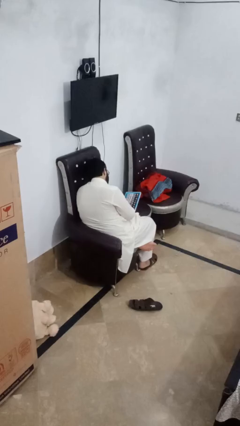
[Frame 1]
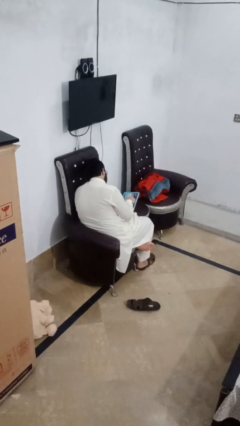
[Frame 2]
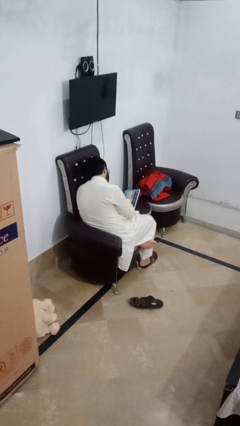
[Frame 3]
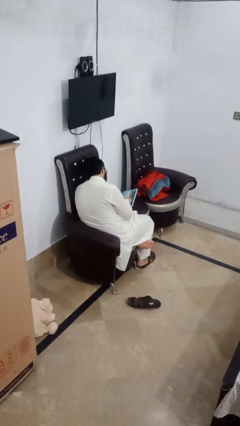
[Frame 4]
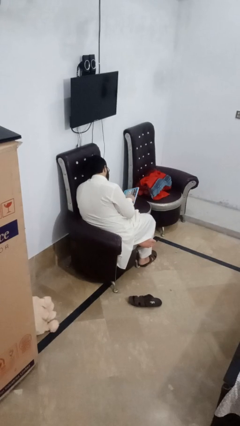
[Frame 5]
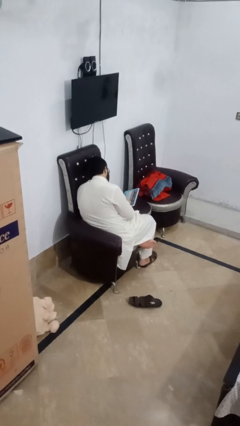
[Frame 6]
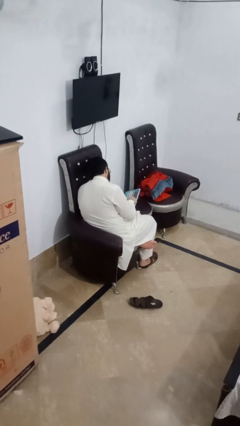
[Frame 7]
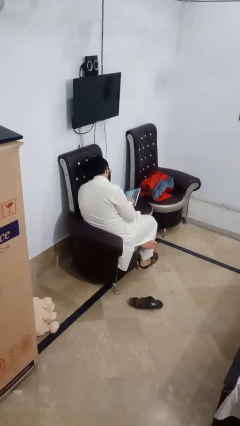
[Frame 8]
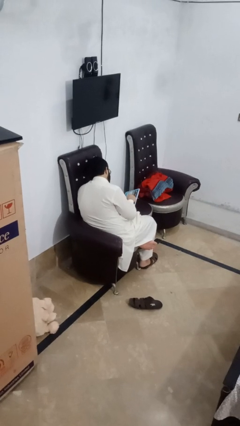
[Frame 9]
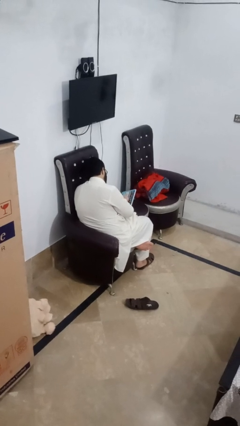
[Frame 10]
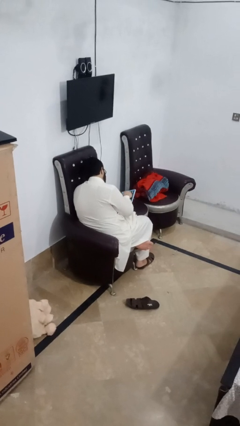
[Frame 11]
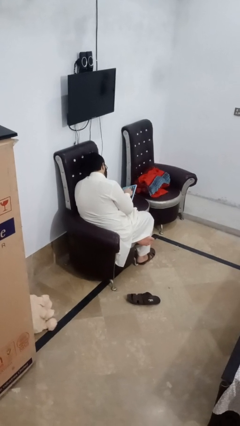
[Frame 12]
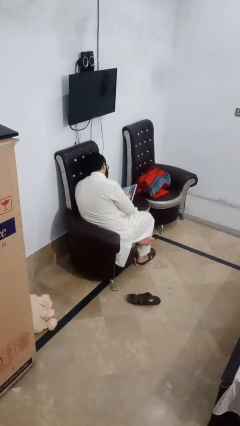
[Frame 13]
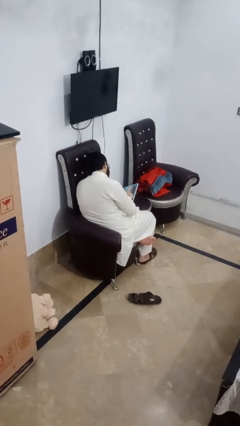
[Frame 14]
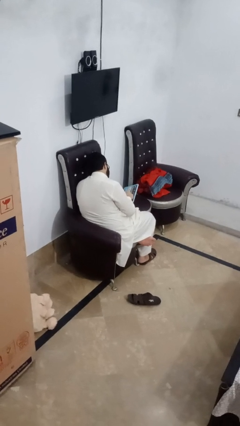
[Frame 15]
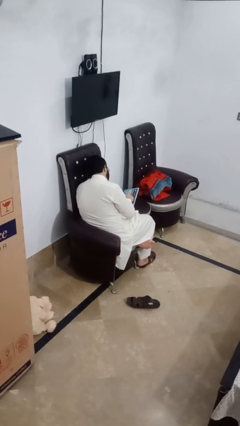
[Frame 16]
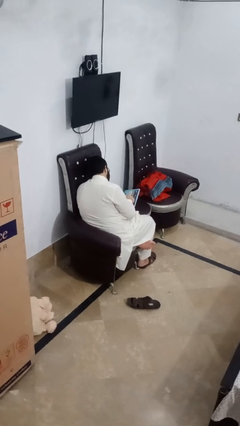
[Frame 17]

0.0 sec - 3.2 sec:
person interacts with tablet

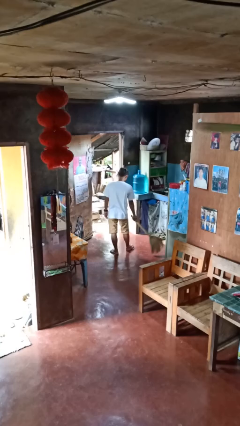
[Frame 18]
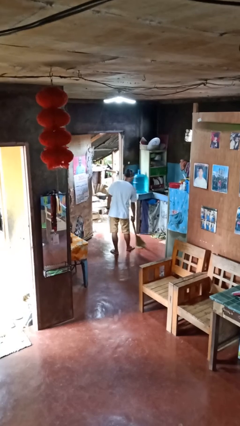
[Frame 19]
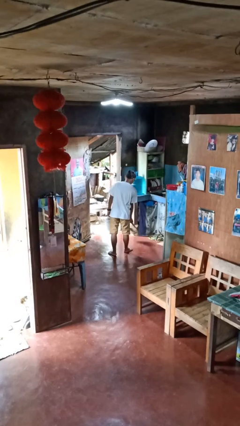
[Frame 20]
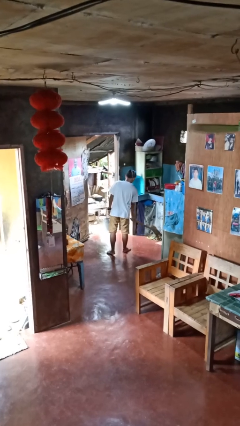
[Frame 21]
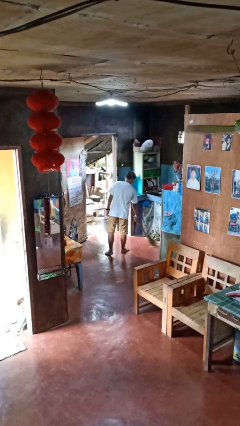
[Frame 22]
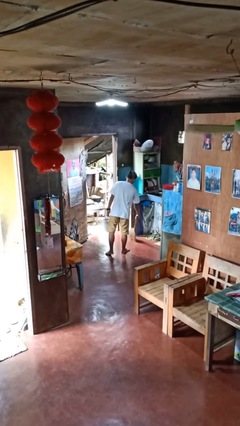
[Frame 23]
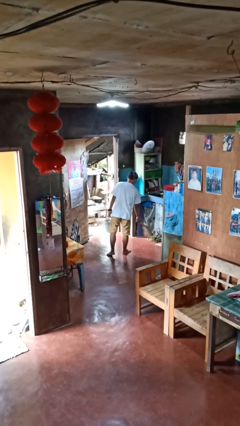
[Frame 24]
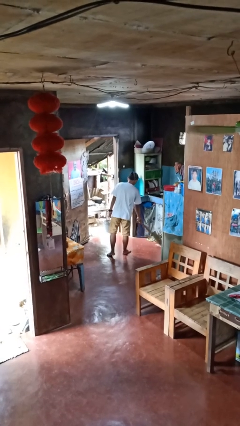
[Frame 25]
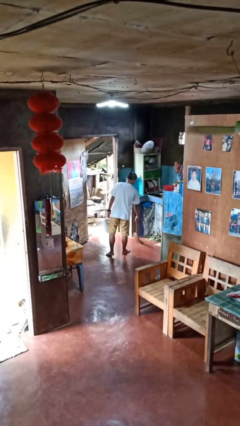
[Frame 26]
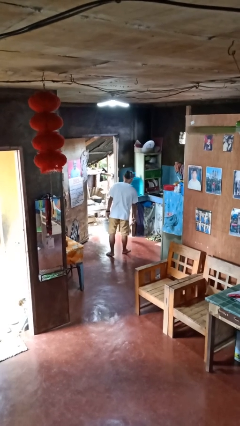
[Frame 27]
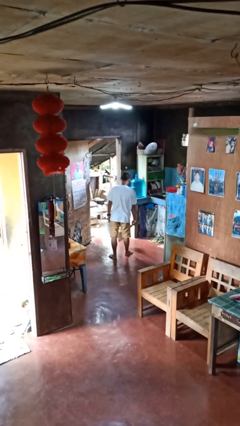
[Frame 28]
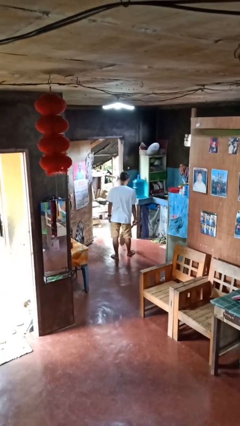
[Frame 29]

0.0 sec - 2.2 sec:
person sweeps floor

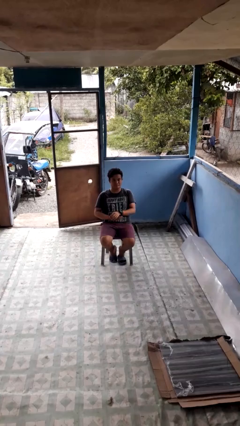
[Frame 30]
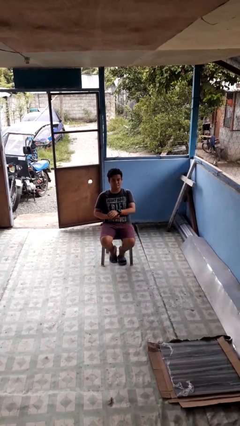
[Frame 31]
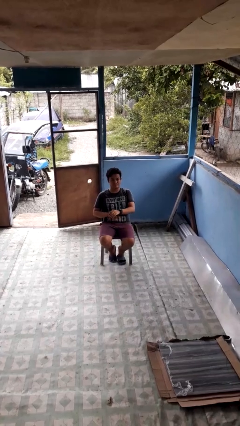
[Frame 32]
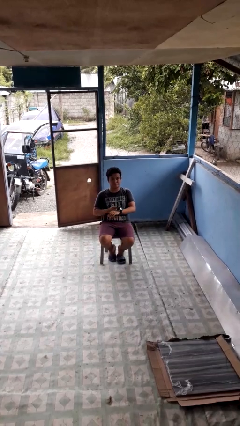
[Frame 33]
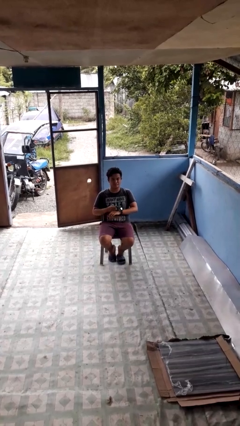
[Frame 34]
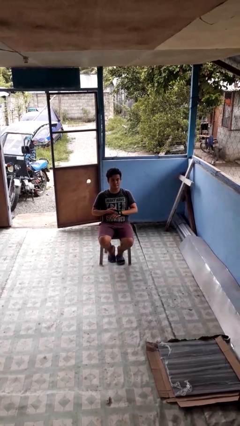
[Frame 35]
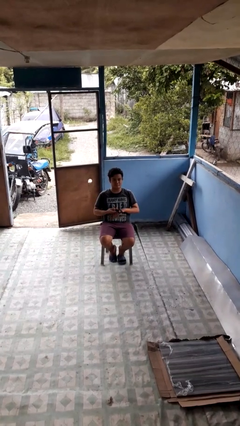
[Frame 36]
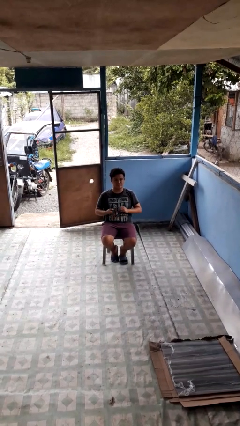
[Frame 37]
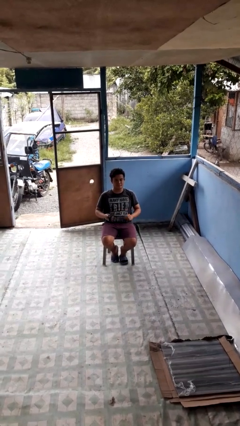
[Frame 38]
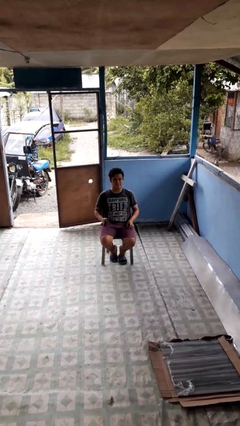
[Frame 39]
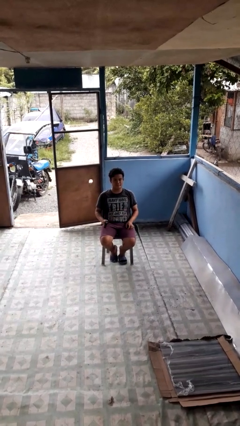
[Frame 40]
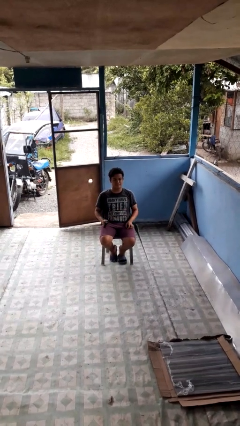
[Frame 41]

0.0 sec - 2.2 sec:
person takes off wristwatch

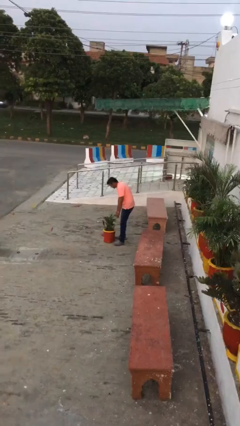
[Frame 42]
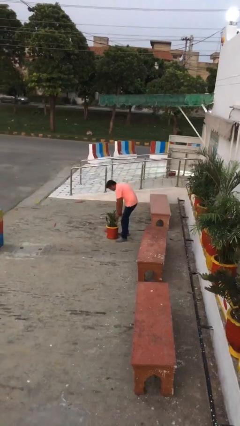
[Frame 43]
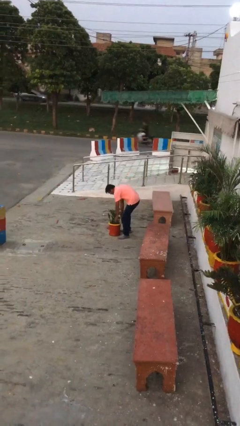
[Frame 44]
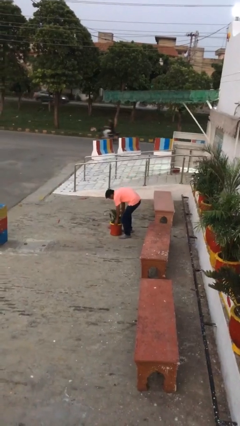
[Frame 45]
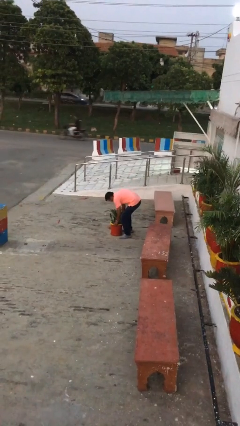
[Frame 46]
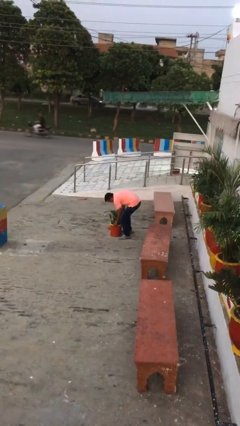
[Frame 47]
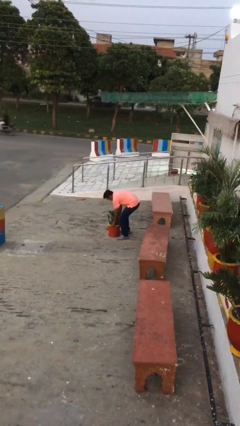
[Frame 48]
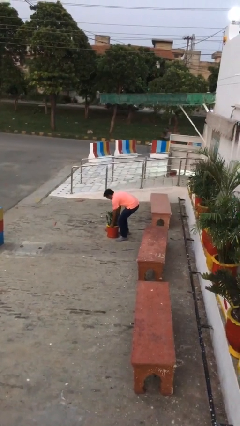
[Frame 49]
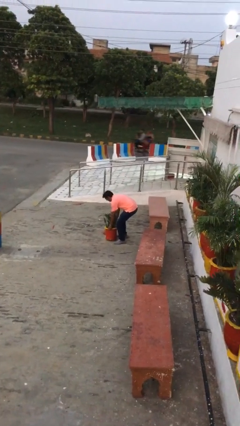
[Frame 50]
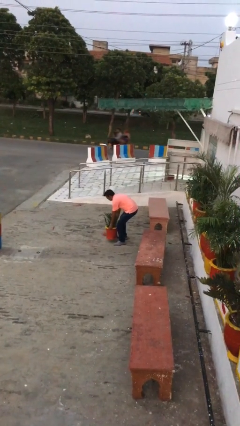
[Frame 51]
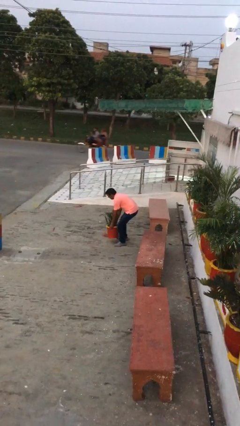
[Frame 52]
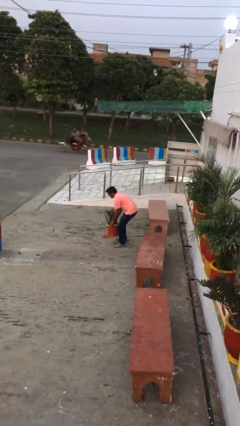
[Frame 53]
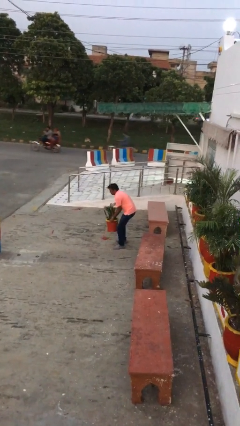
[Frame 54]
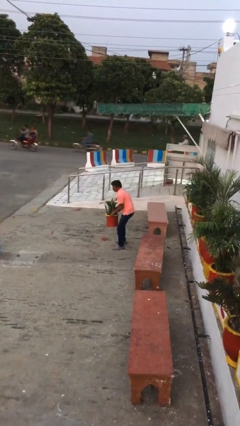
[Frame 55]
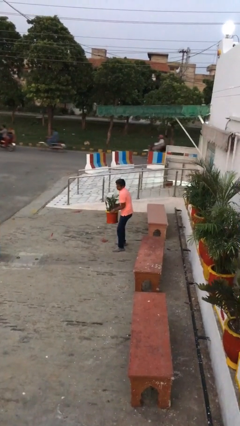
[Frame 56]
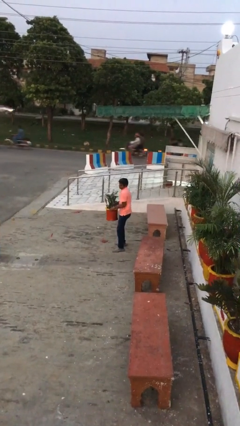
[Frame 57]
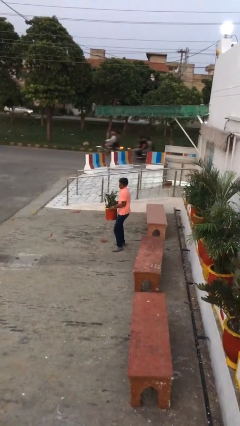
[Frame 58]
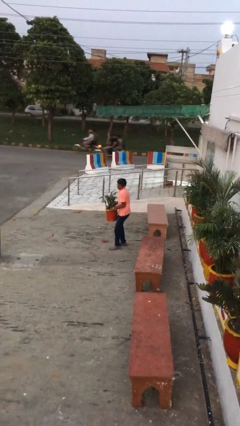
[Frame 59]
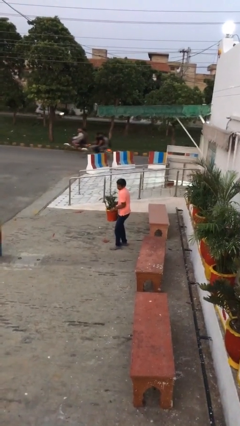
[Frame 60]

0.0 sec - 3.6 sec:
person picks up object from floor

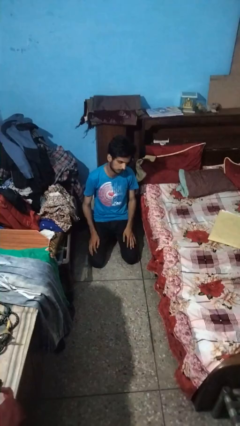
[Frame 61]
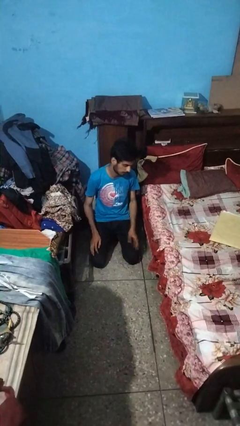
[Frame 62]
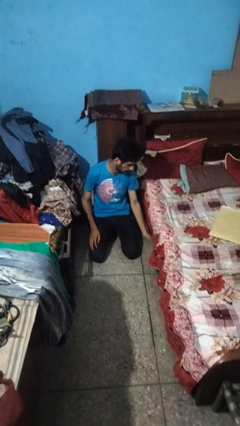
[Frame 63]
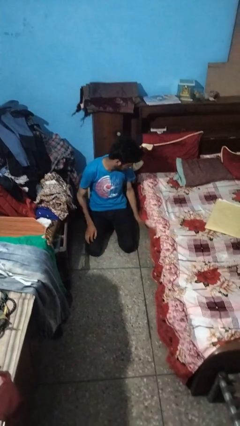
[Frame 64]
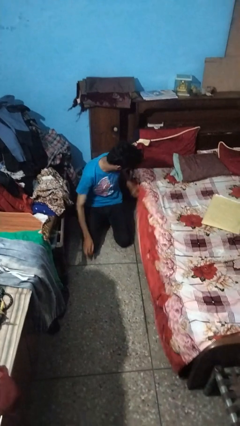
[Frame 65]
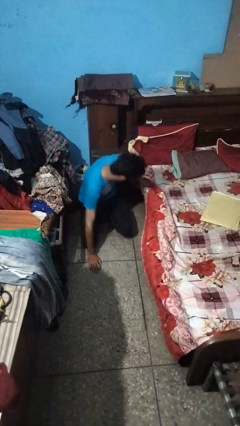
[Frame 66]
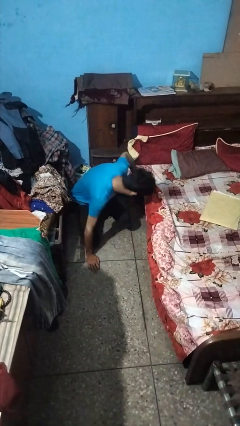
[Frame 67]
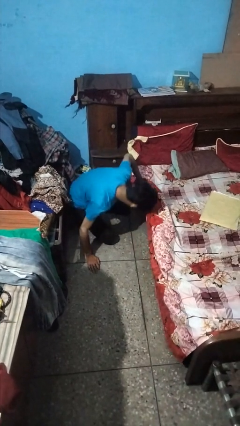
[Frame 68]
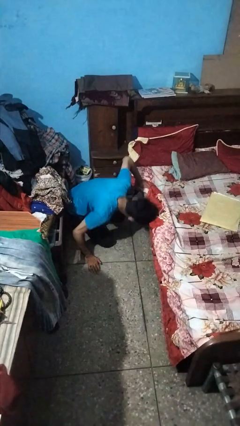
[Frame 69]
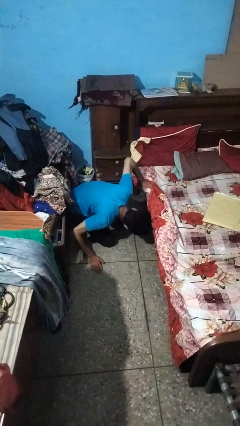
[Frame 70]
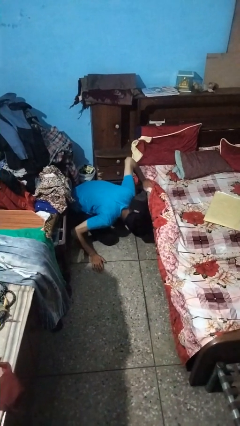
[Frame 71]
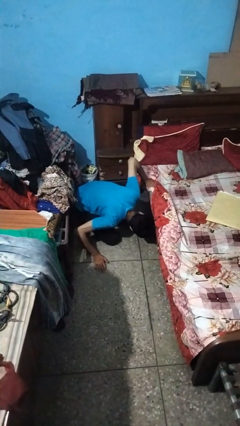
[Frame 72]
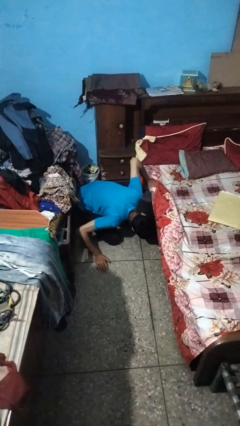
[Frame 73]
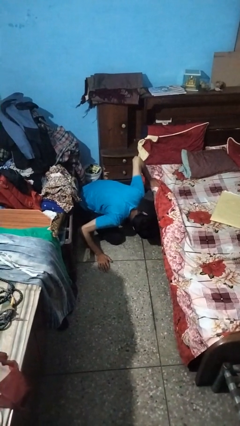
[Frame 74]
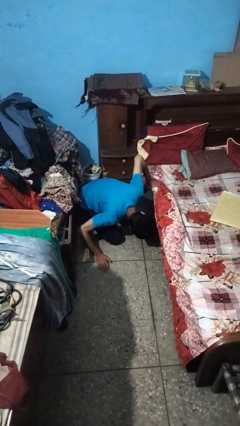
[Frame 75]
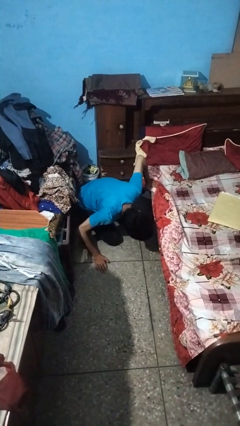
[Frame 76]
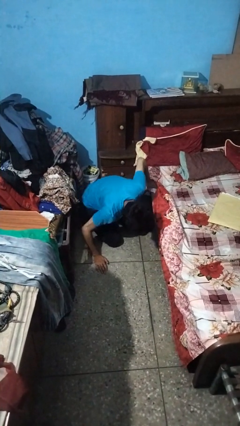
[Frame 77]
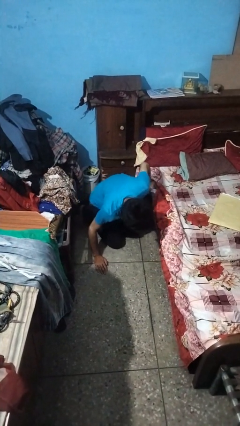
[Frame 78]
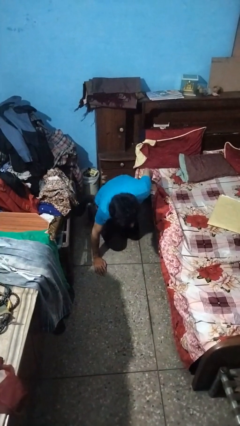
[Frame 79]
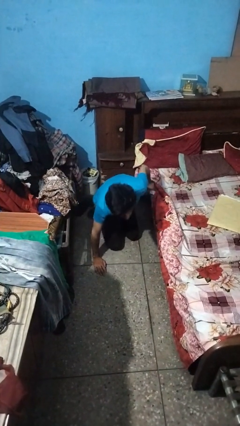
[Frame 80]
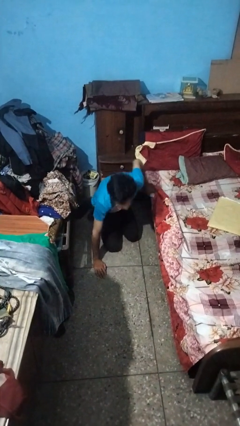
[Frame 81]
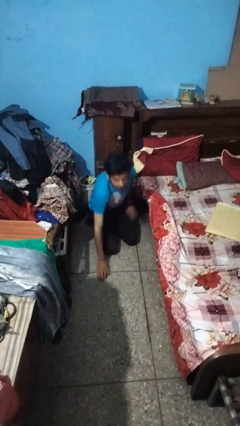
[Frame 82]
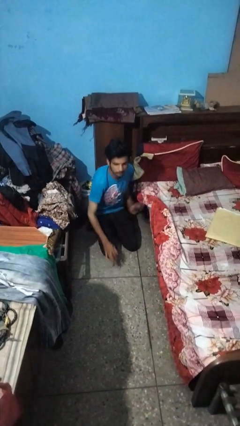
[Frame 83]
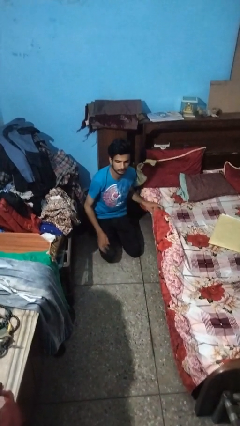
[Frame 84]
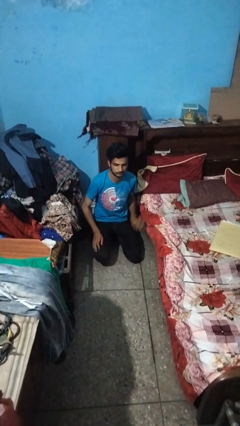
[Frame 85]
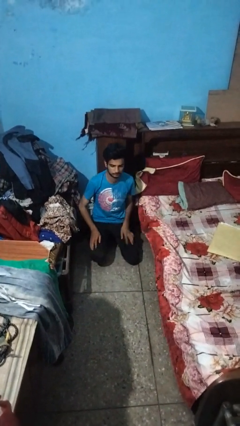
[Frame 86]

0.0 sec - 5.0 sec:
person searches under bed

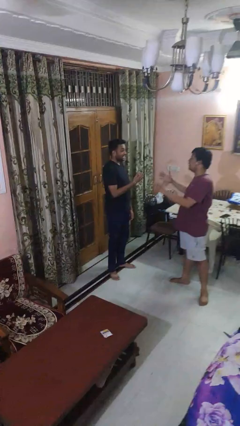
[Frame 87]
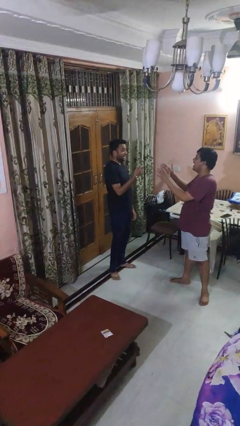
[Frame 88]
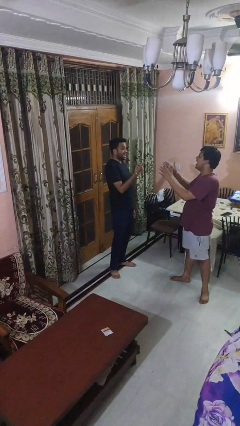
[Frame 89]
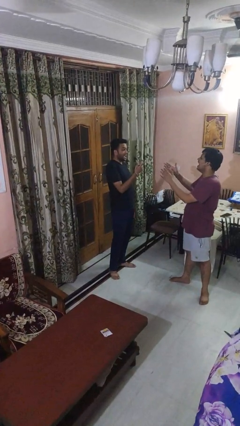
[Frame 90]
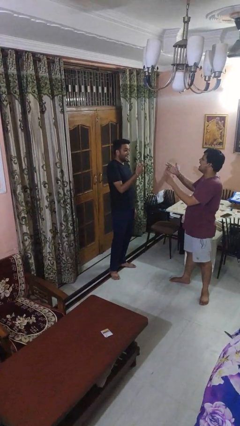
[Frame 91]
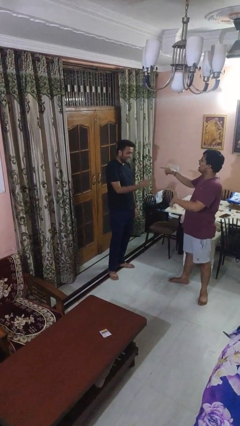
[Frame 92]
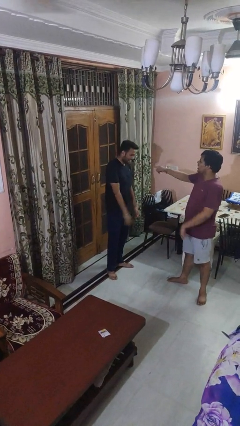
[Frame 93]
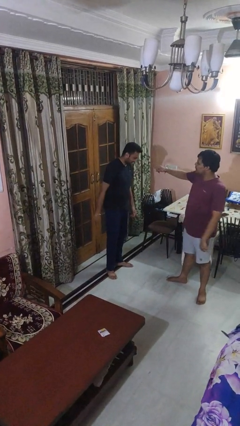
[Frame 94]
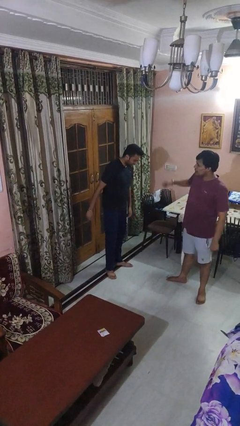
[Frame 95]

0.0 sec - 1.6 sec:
person laughs with person
